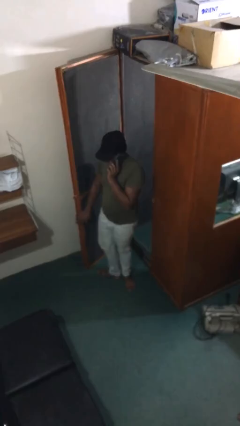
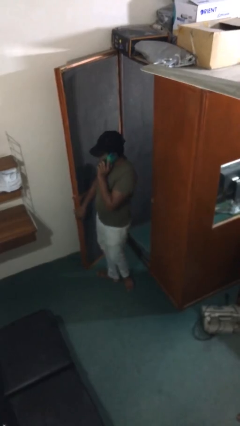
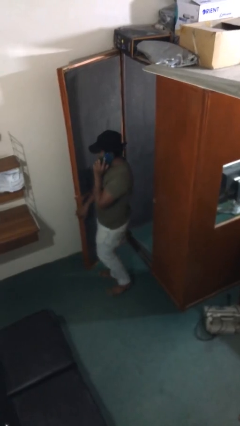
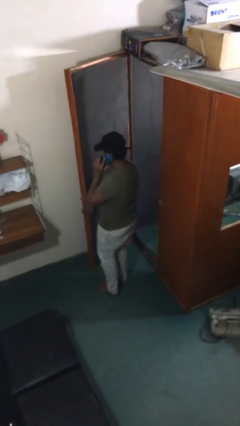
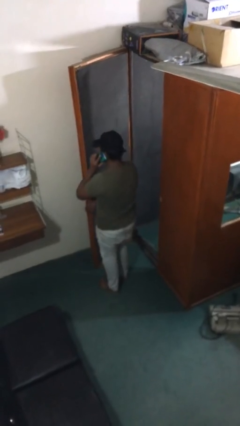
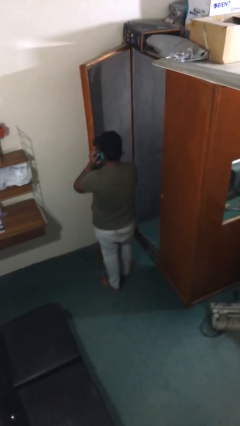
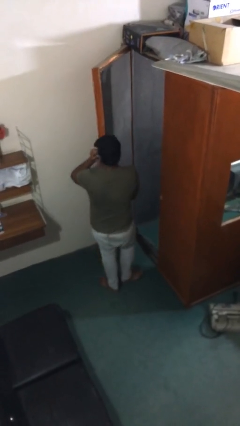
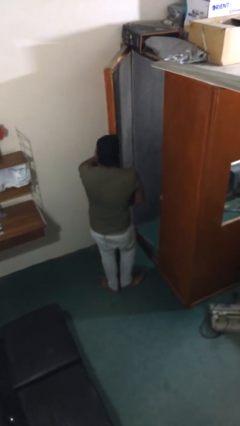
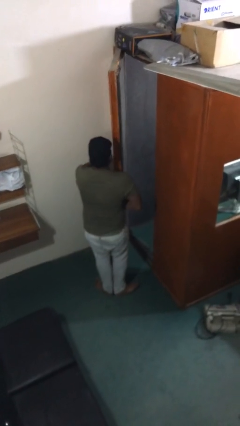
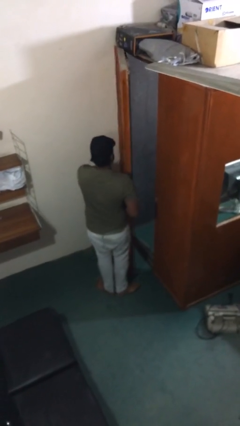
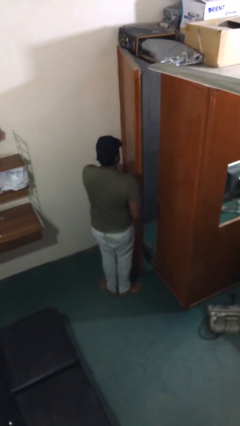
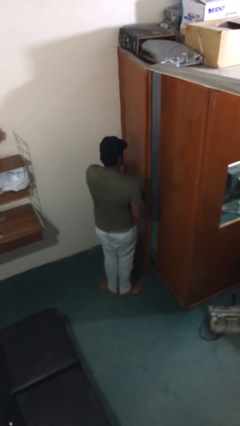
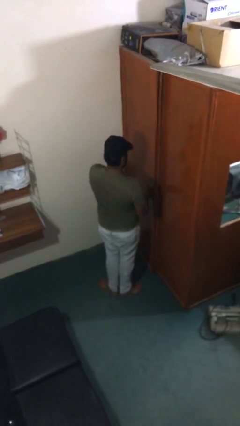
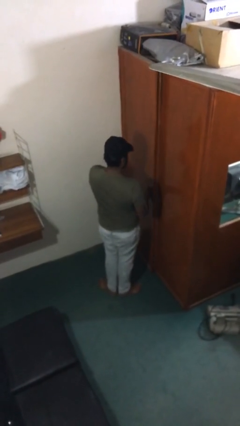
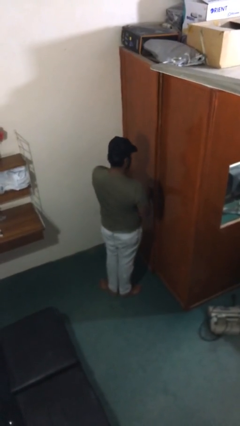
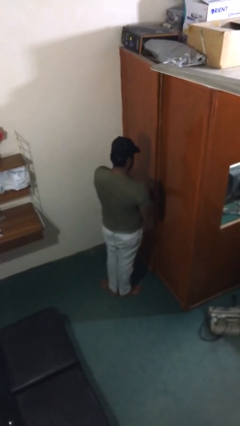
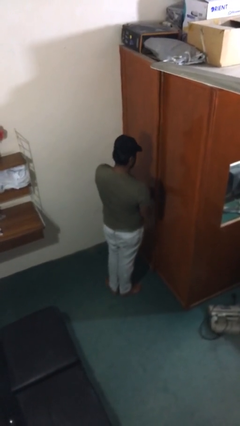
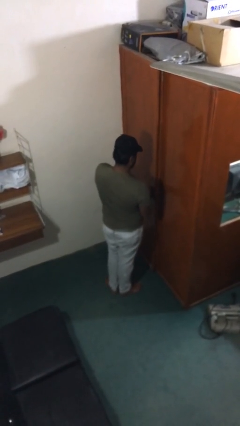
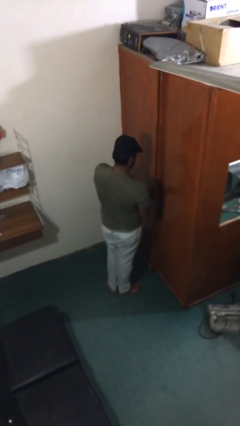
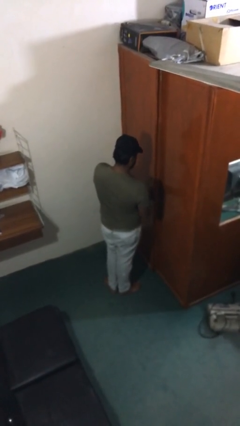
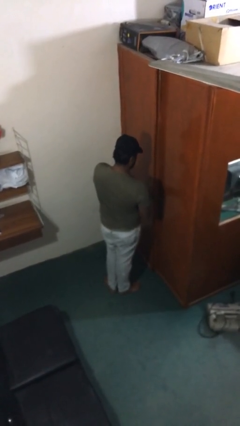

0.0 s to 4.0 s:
person closes facility door

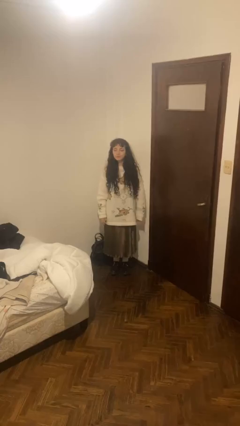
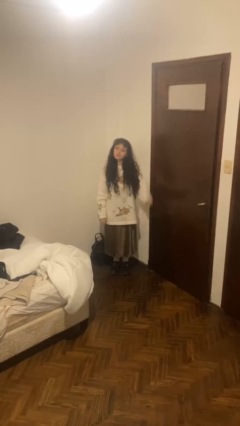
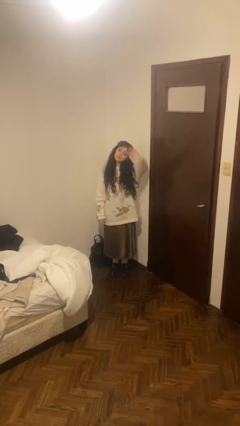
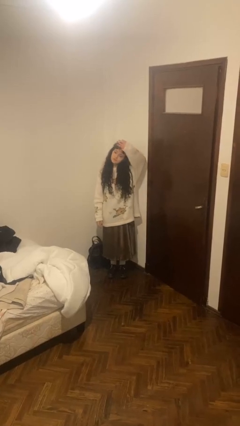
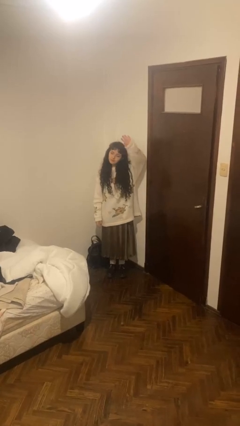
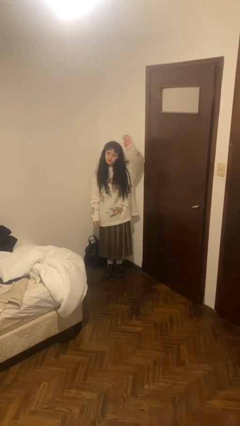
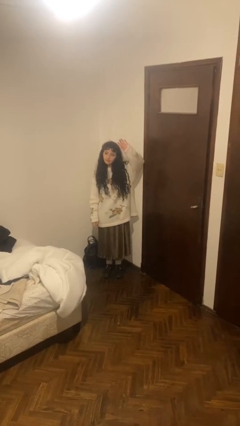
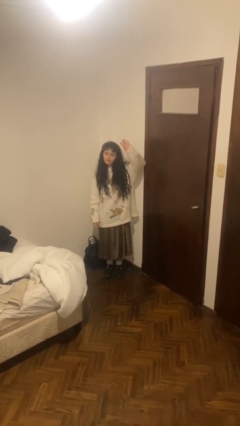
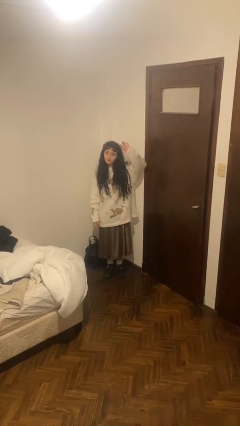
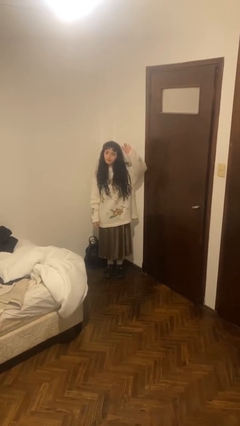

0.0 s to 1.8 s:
person gestures raise hand

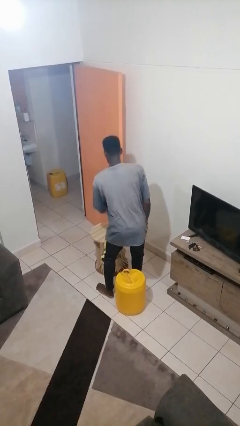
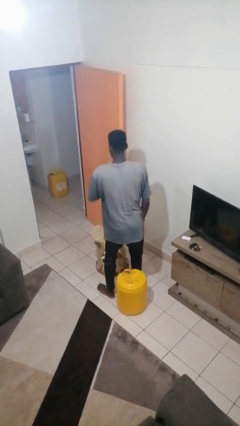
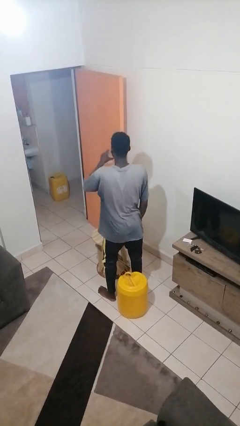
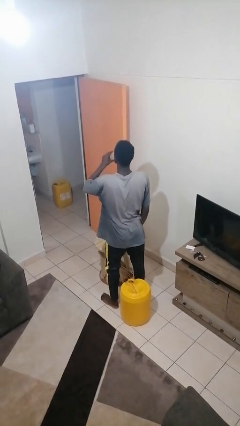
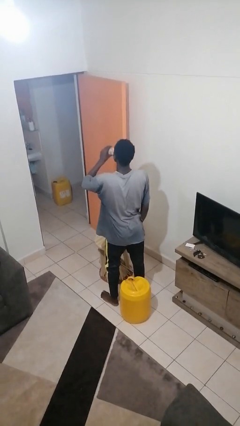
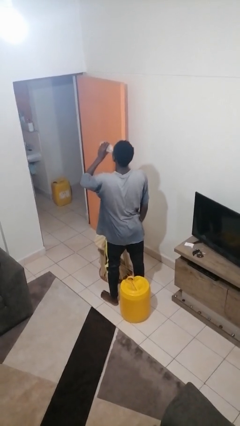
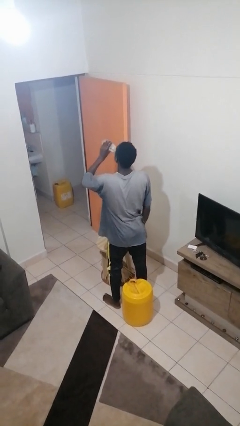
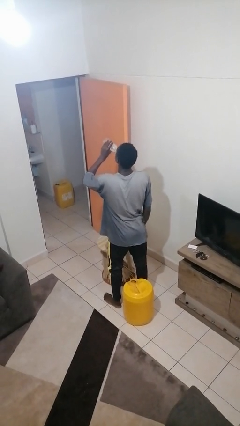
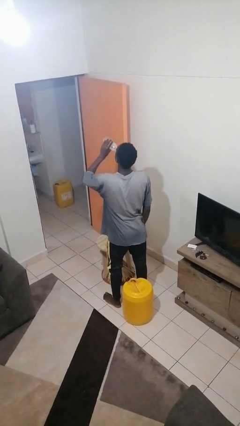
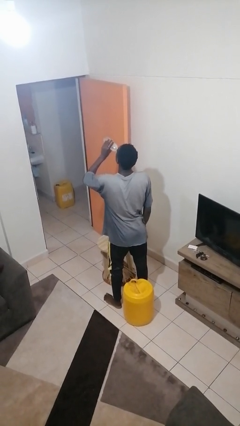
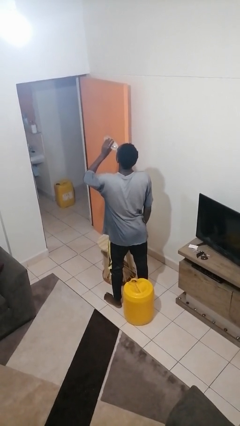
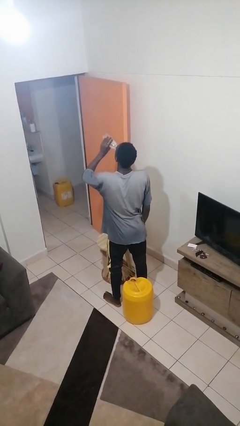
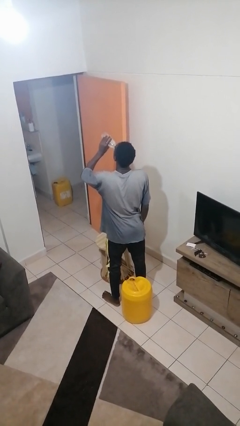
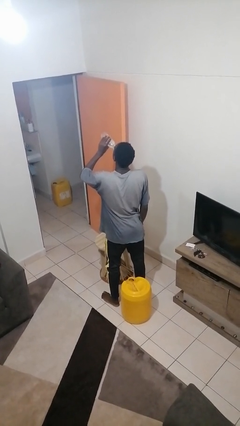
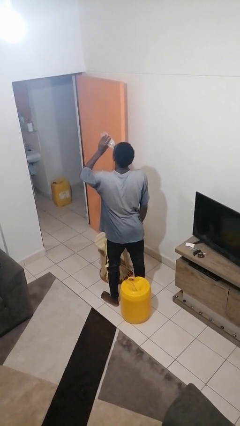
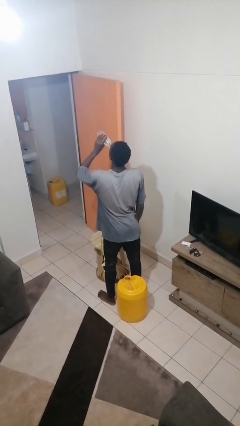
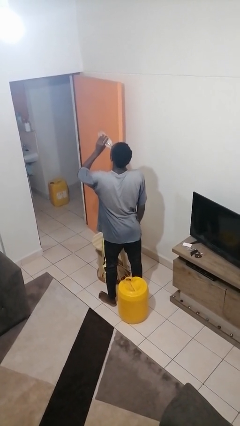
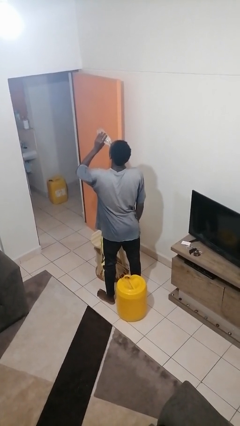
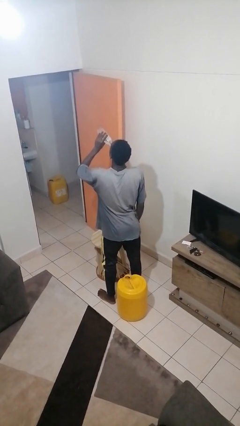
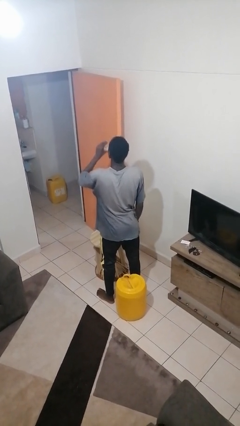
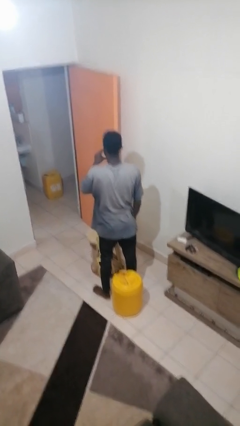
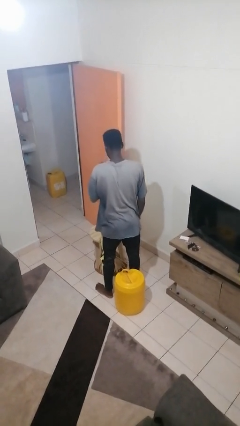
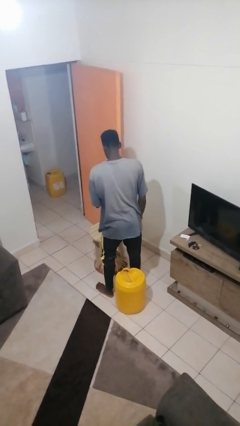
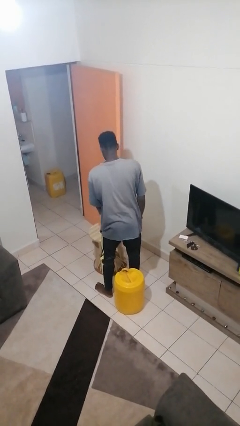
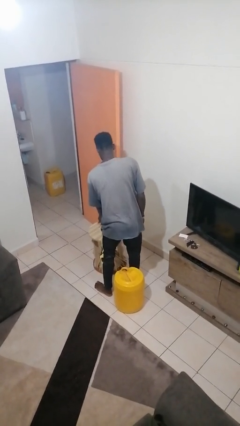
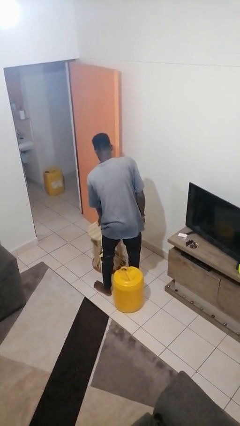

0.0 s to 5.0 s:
person drinks from bottle

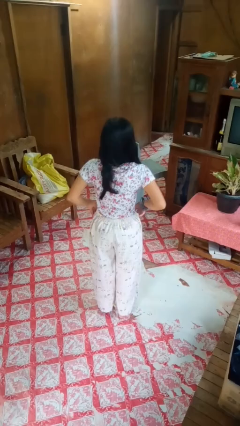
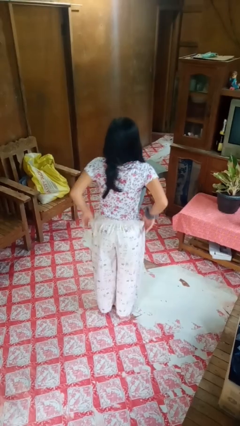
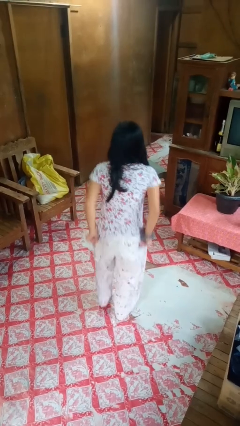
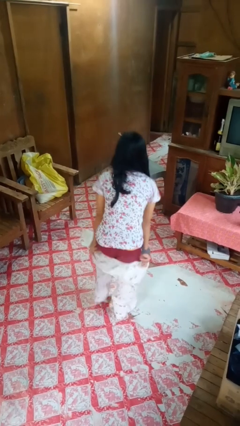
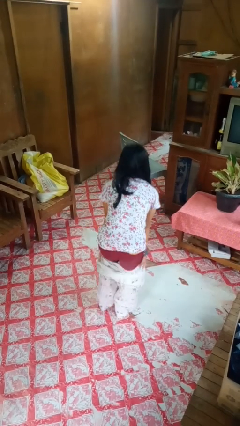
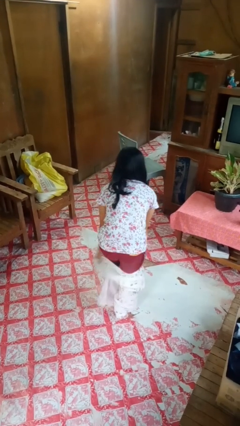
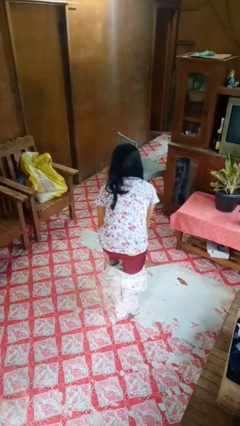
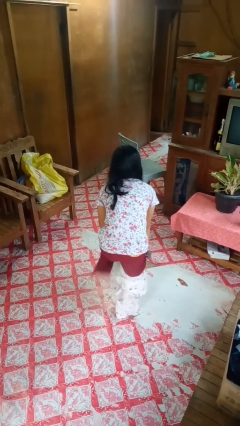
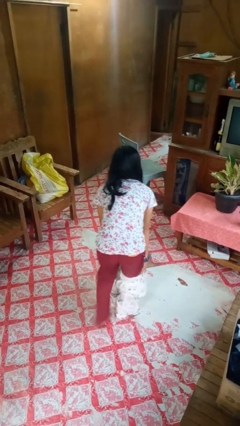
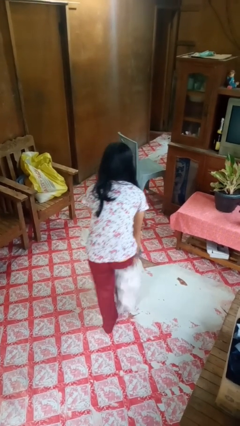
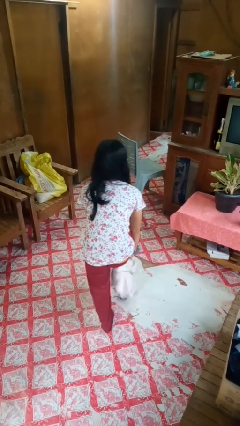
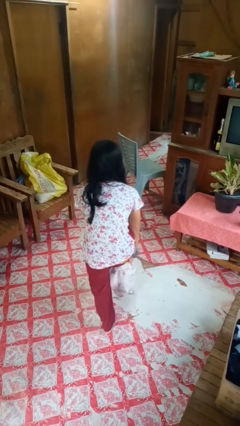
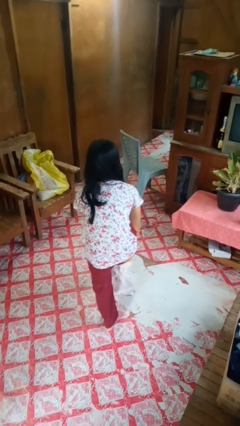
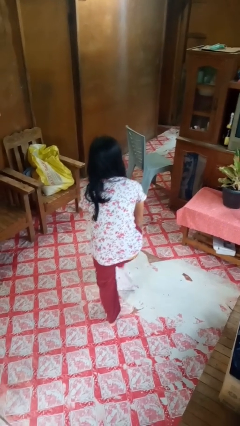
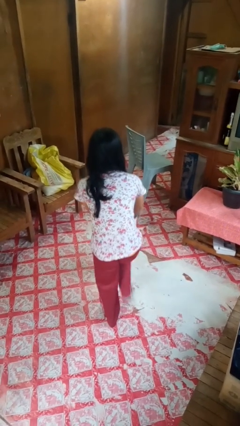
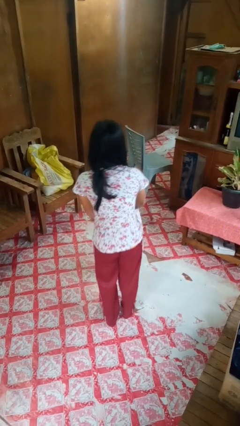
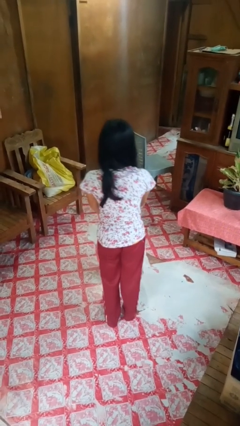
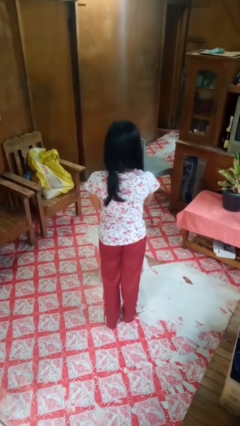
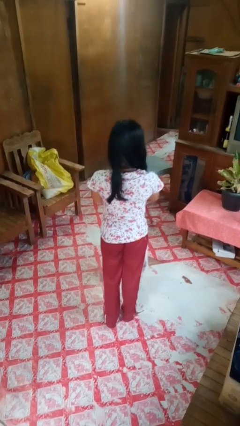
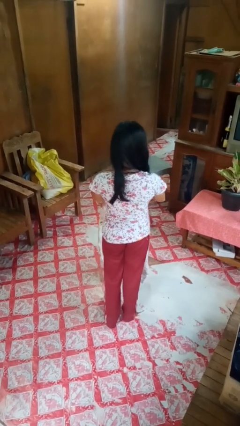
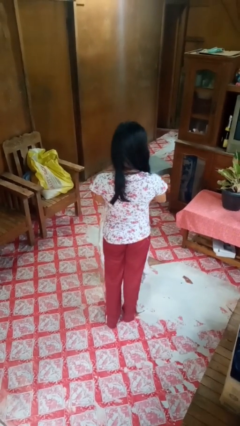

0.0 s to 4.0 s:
person takes off pants

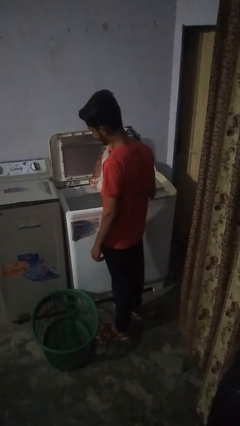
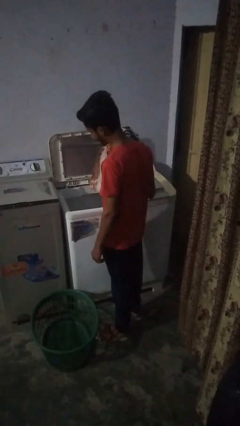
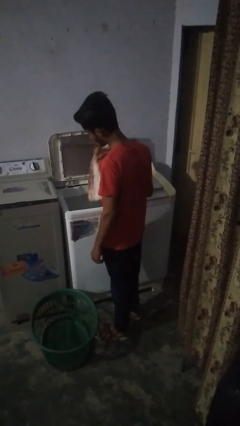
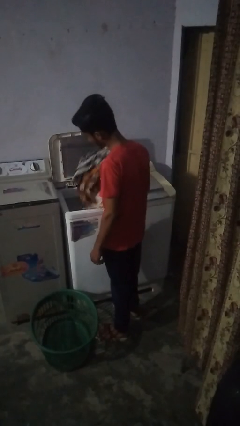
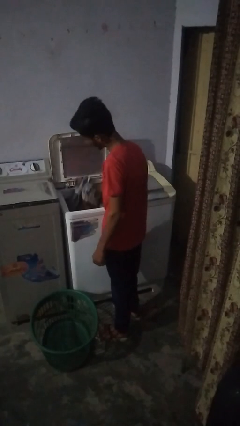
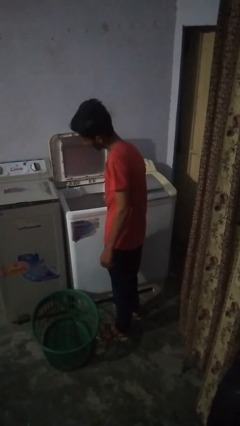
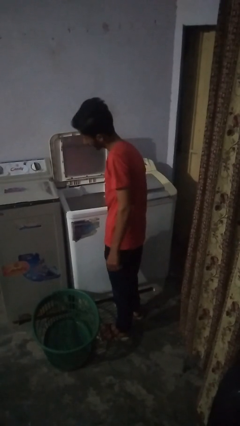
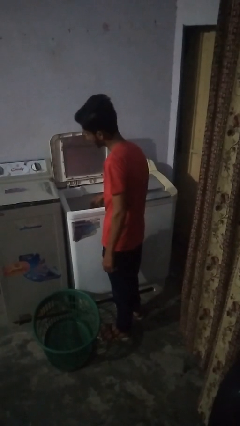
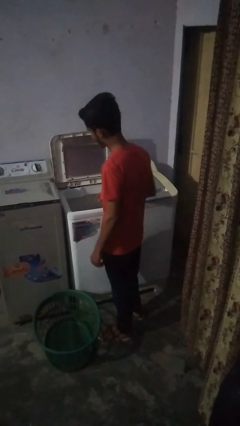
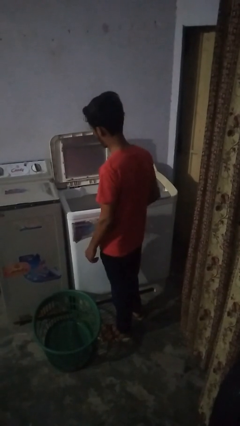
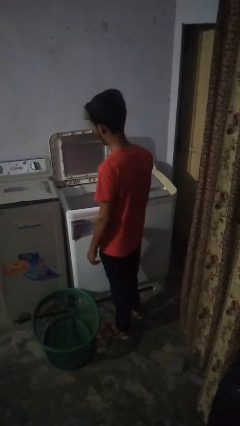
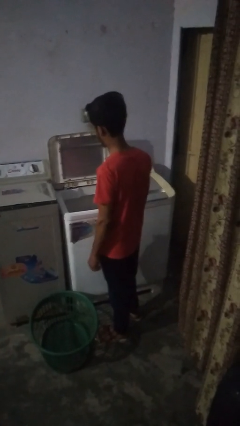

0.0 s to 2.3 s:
person loads clotheswasher

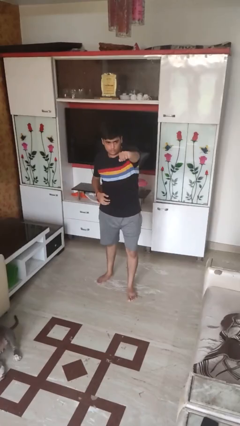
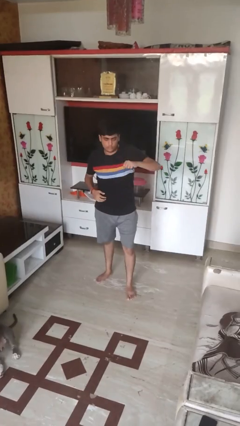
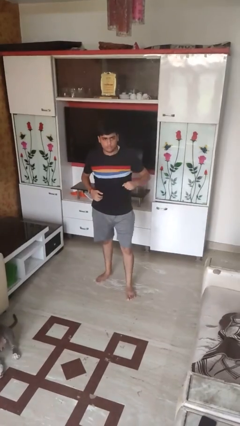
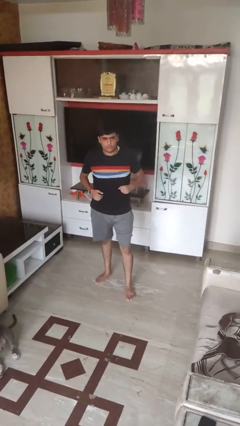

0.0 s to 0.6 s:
person punches
